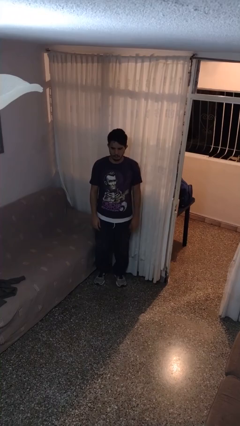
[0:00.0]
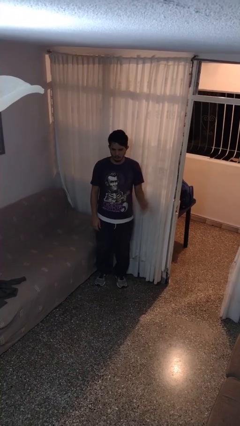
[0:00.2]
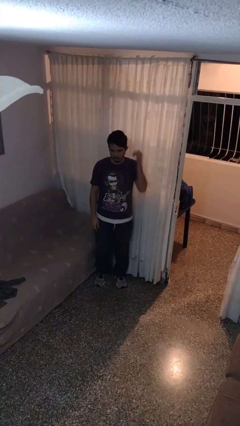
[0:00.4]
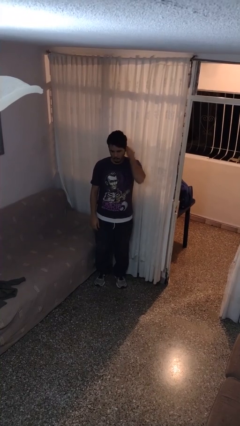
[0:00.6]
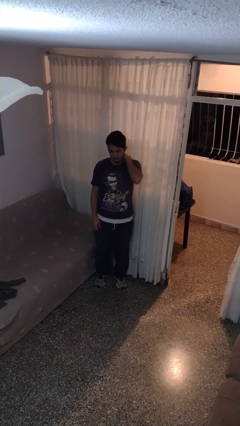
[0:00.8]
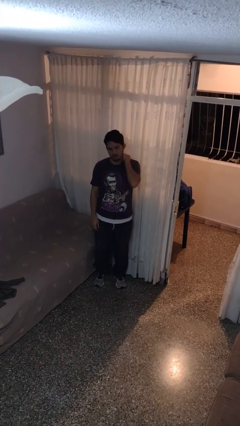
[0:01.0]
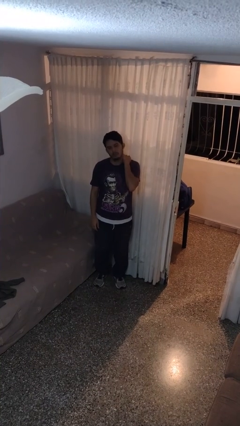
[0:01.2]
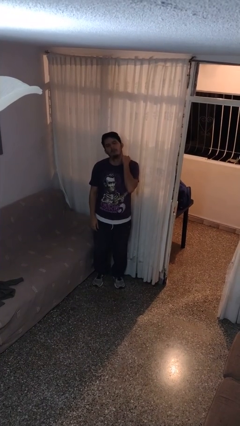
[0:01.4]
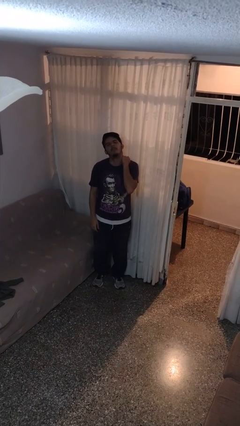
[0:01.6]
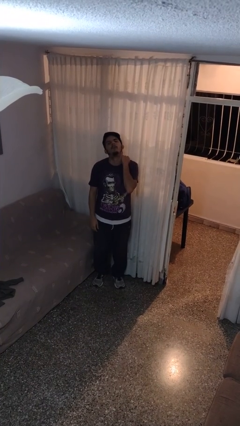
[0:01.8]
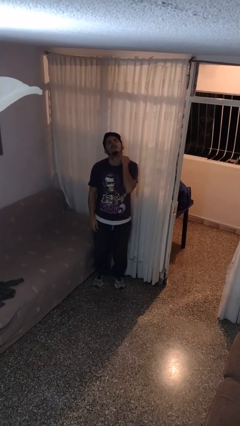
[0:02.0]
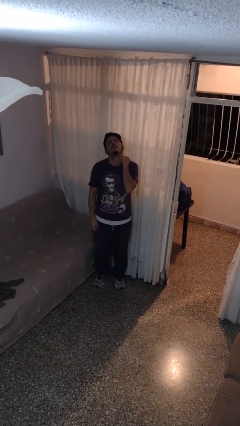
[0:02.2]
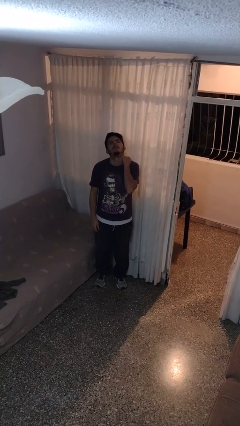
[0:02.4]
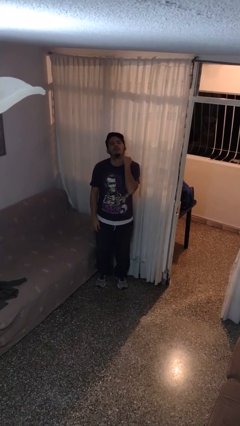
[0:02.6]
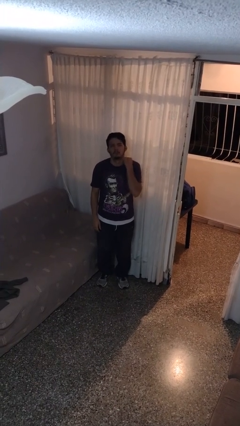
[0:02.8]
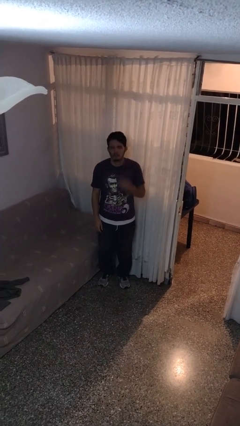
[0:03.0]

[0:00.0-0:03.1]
person rubs neck

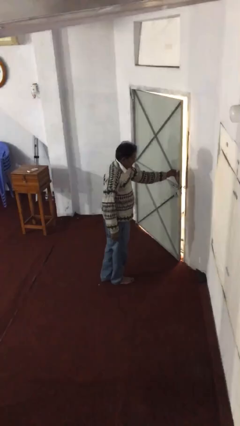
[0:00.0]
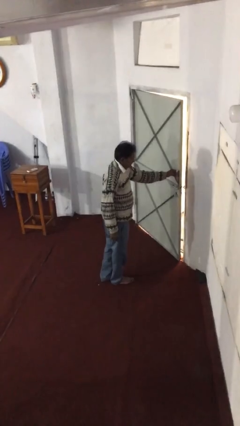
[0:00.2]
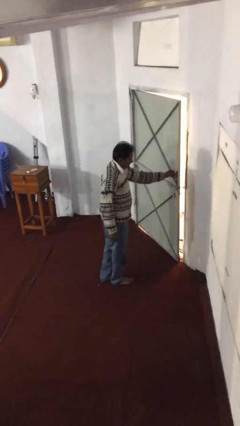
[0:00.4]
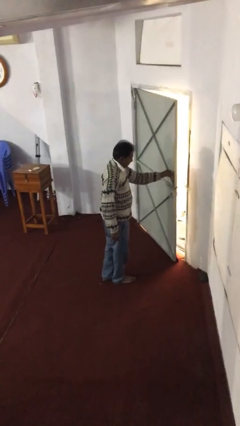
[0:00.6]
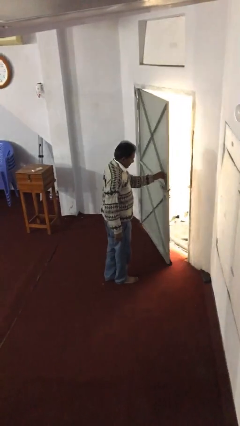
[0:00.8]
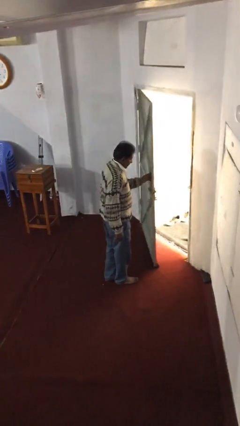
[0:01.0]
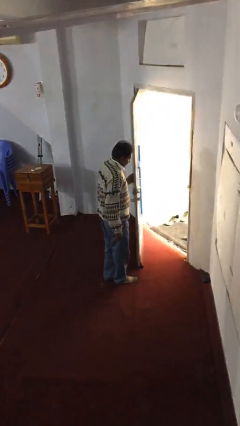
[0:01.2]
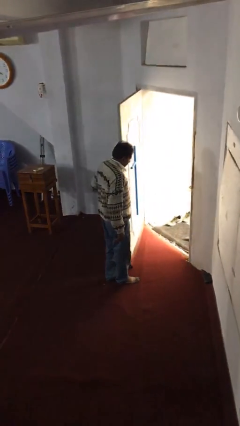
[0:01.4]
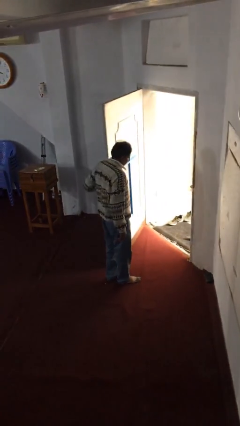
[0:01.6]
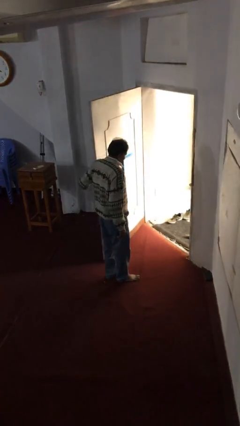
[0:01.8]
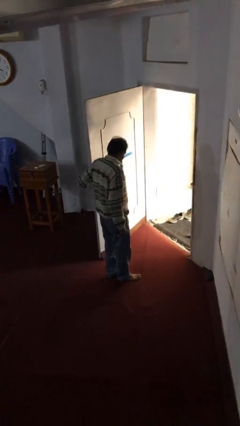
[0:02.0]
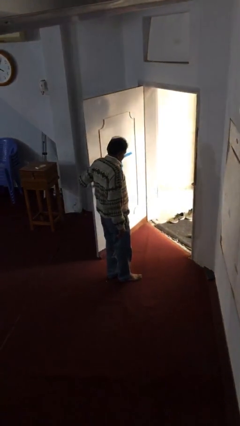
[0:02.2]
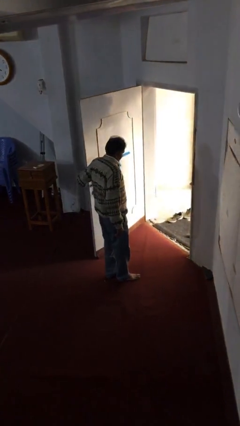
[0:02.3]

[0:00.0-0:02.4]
person opens facility door

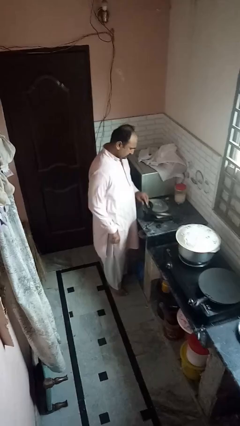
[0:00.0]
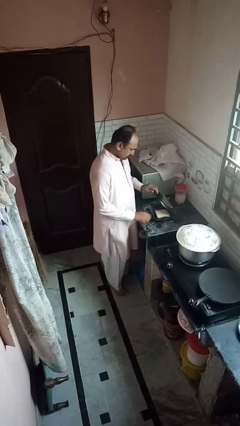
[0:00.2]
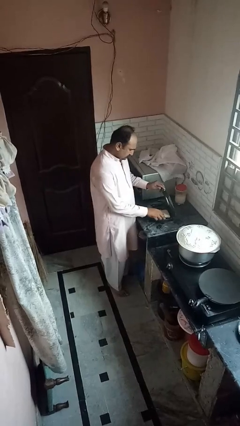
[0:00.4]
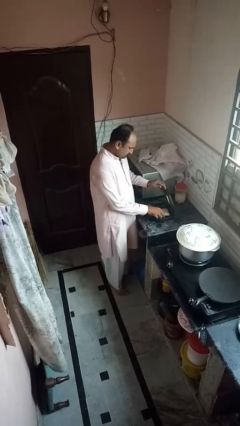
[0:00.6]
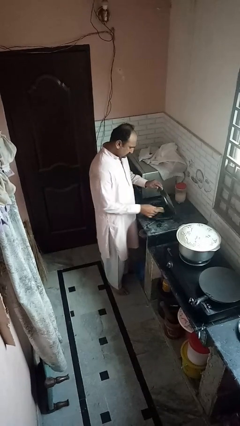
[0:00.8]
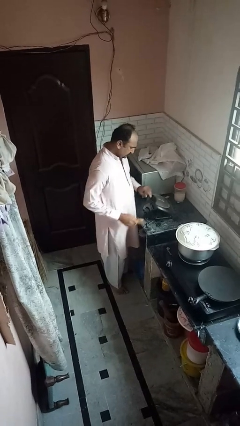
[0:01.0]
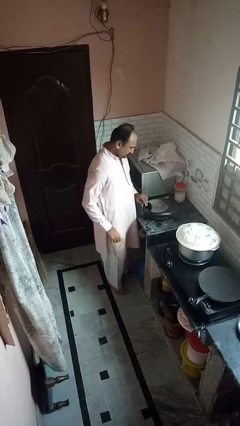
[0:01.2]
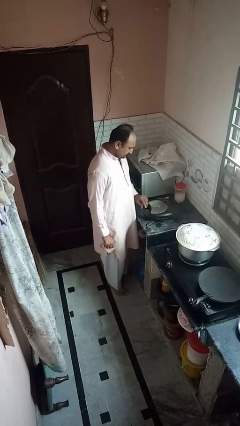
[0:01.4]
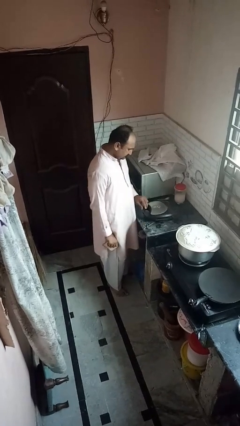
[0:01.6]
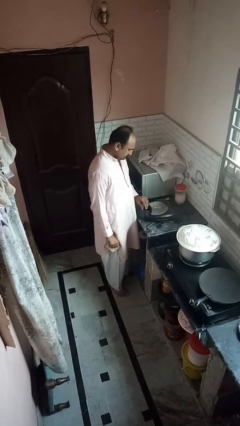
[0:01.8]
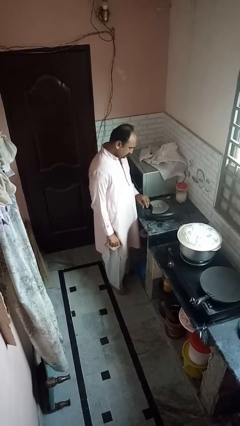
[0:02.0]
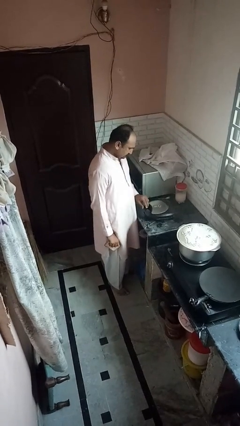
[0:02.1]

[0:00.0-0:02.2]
person takes object from toaster

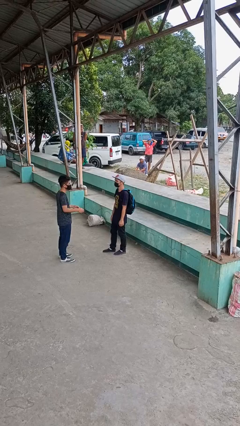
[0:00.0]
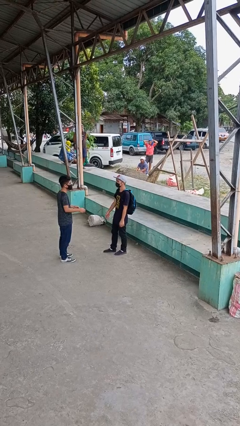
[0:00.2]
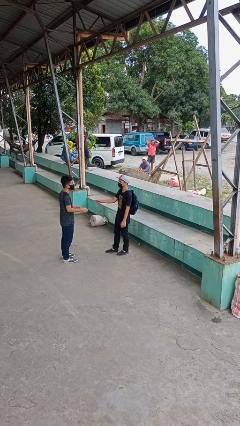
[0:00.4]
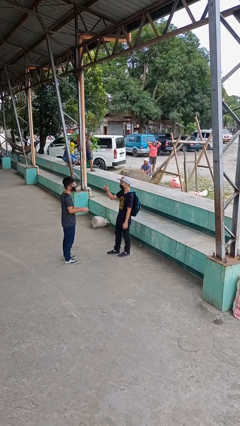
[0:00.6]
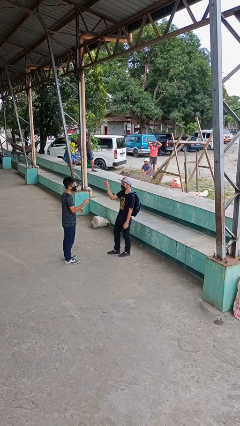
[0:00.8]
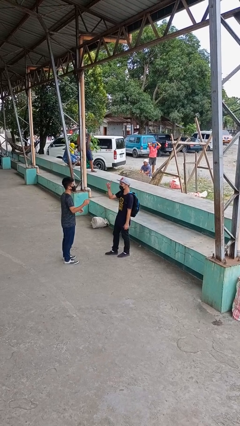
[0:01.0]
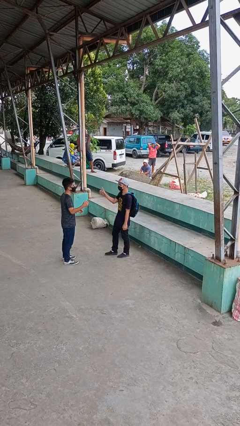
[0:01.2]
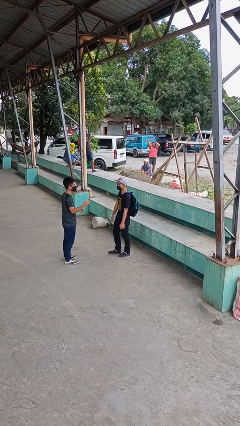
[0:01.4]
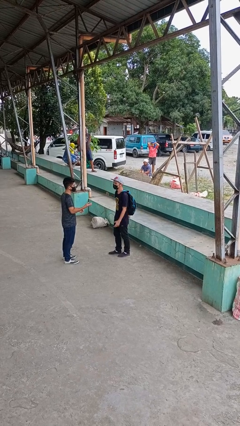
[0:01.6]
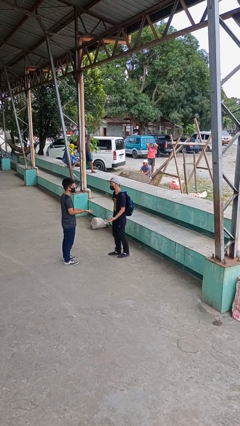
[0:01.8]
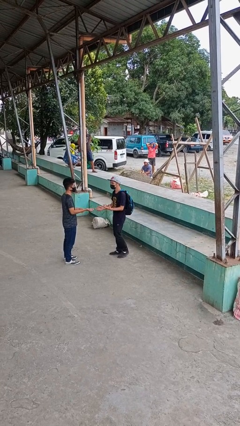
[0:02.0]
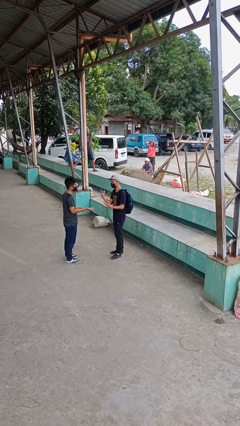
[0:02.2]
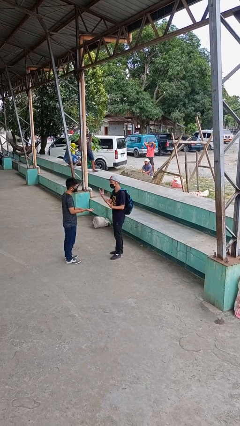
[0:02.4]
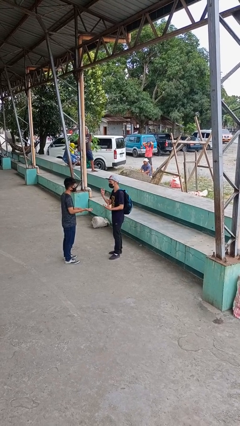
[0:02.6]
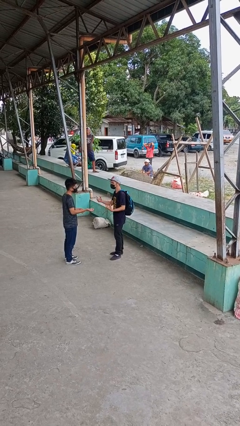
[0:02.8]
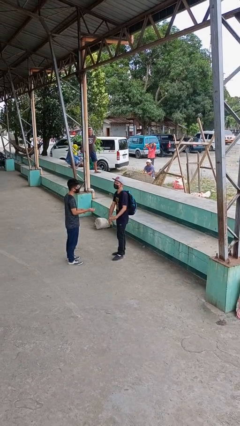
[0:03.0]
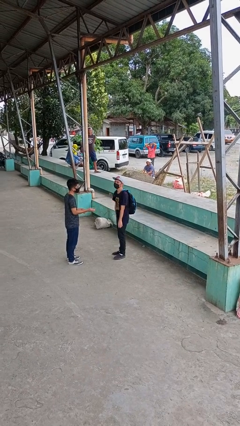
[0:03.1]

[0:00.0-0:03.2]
person talks to person

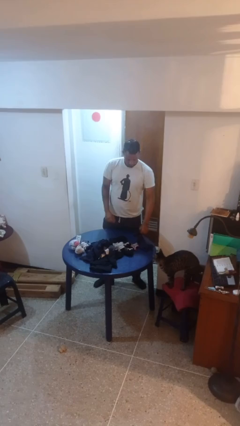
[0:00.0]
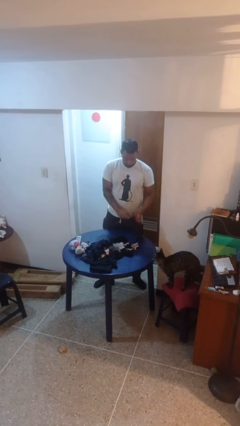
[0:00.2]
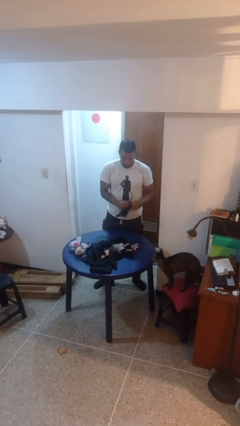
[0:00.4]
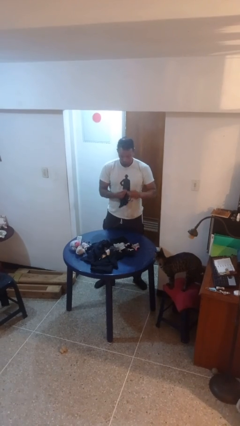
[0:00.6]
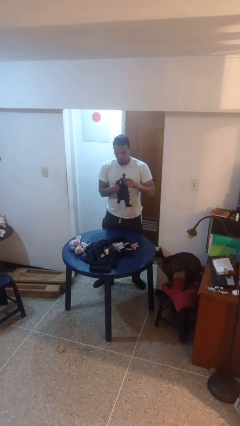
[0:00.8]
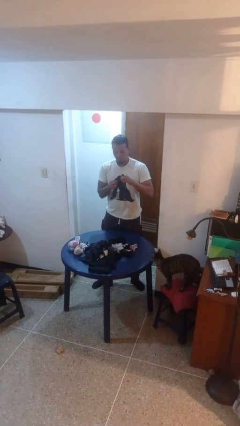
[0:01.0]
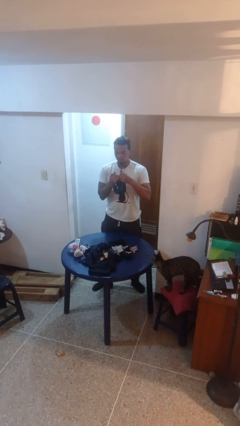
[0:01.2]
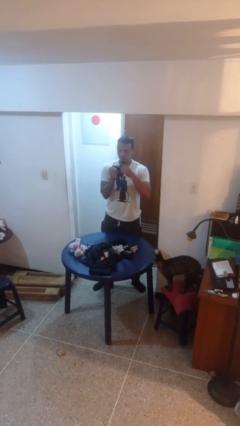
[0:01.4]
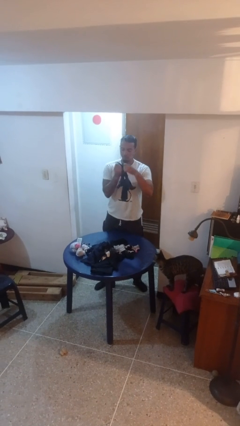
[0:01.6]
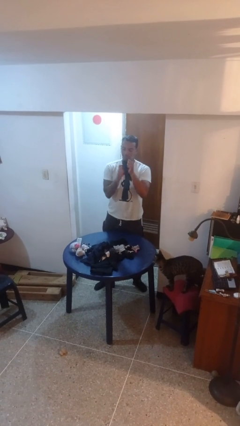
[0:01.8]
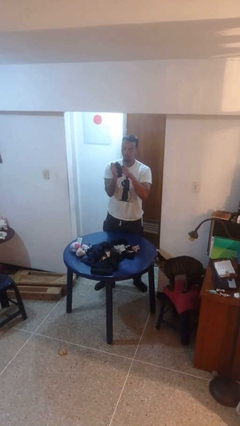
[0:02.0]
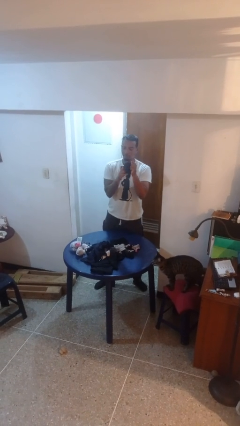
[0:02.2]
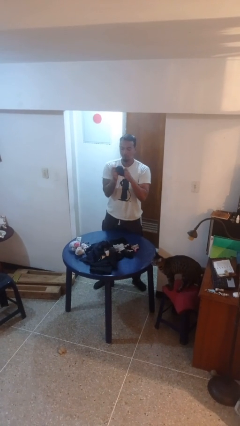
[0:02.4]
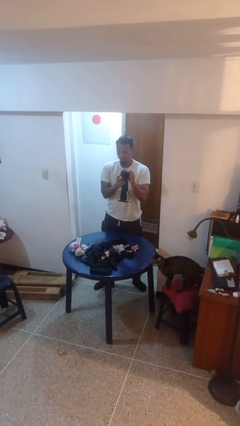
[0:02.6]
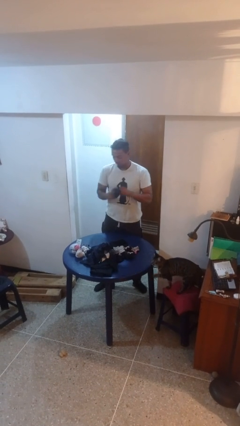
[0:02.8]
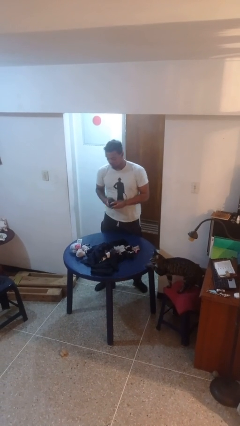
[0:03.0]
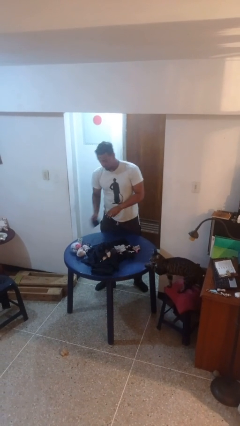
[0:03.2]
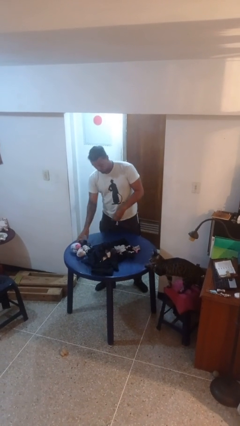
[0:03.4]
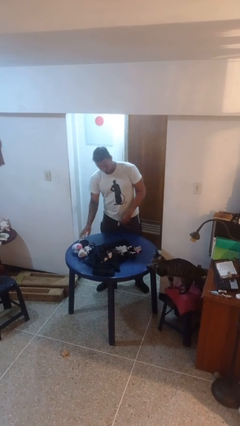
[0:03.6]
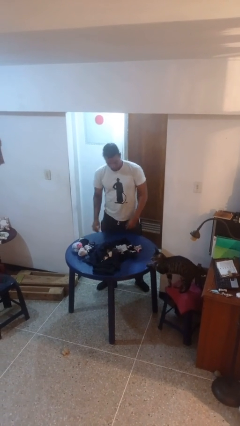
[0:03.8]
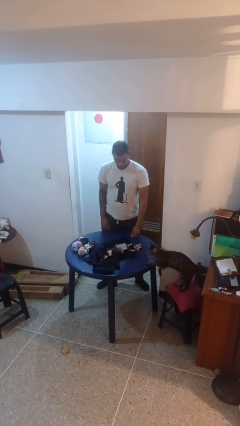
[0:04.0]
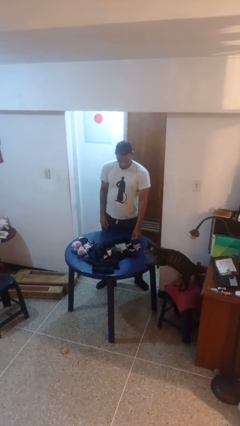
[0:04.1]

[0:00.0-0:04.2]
person folds socks

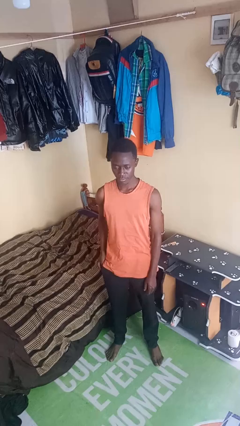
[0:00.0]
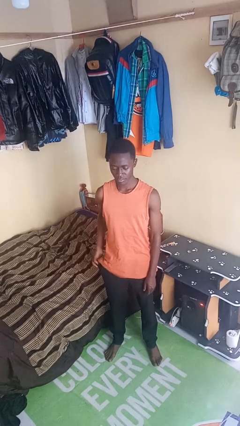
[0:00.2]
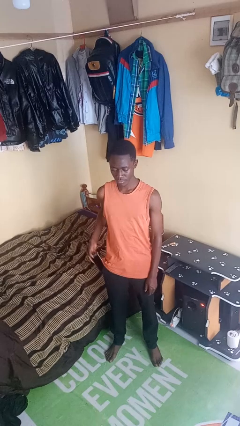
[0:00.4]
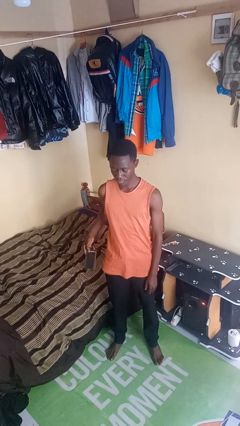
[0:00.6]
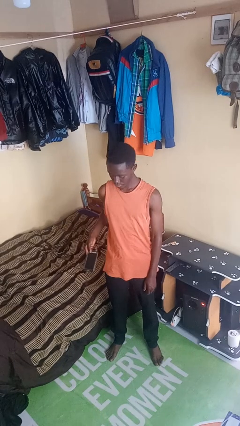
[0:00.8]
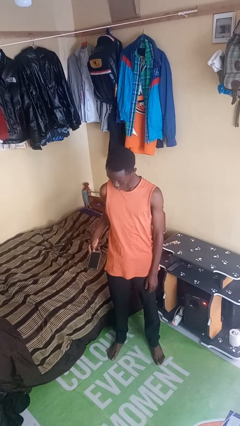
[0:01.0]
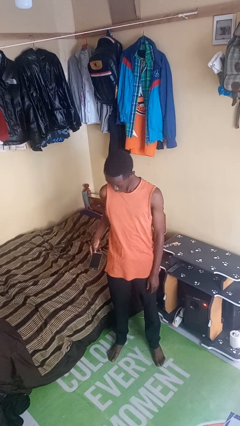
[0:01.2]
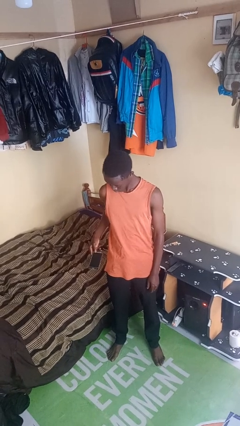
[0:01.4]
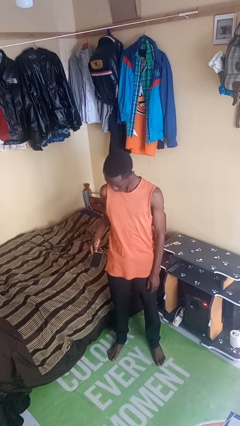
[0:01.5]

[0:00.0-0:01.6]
person takes phone from pocket

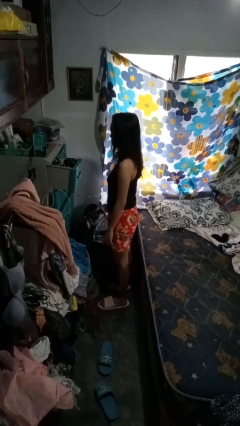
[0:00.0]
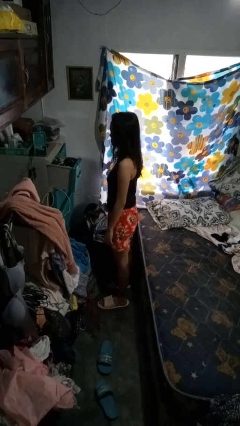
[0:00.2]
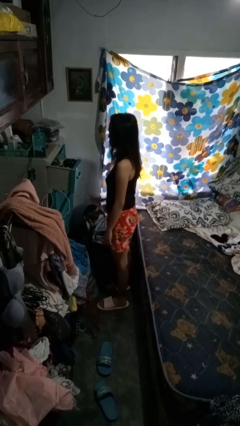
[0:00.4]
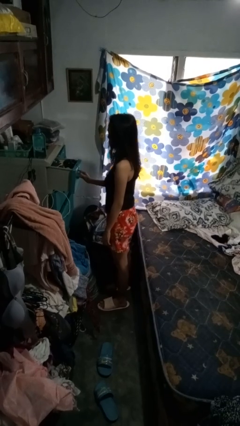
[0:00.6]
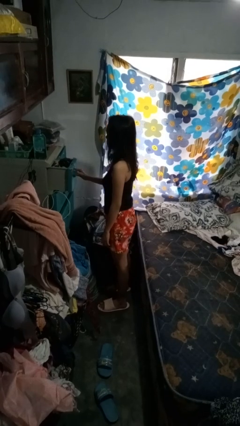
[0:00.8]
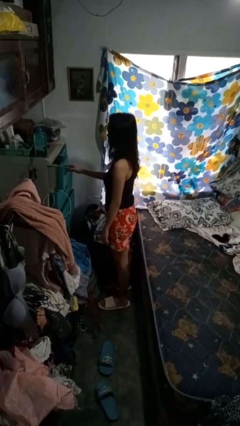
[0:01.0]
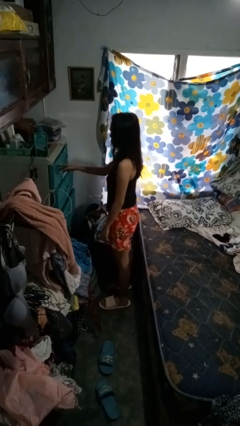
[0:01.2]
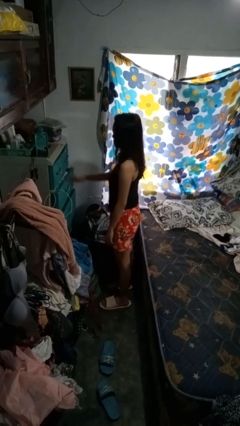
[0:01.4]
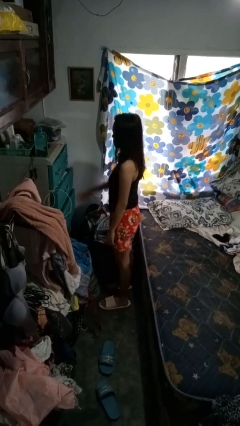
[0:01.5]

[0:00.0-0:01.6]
person closes dresser drawer
